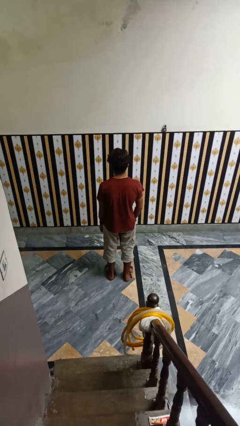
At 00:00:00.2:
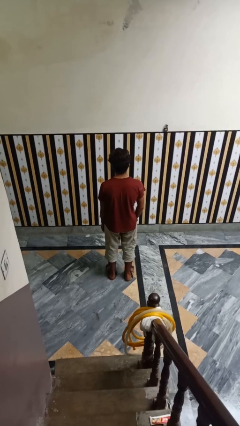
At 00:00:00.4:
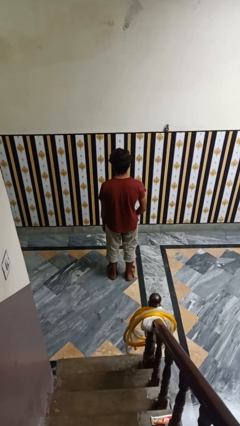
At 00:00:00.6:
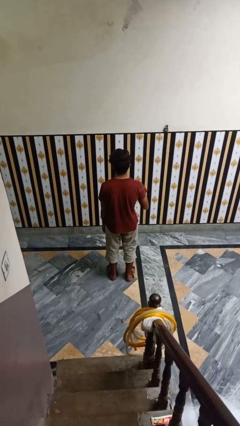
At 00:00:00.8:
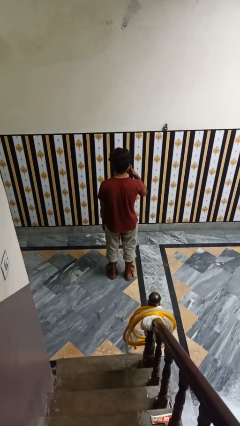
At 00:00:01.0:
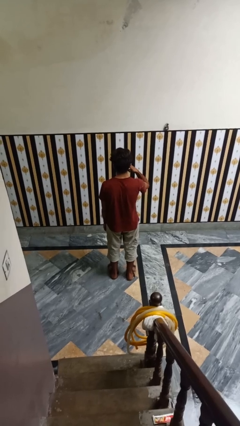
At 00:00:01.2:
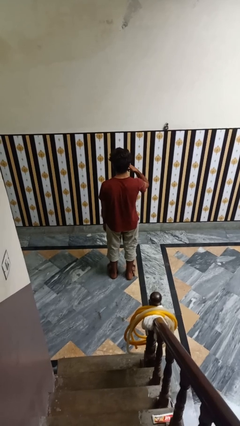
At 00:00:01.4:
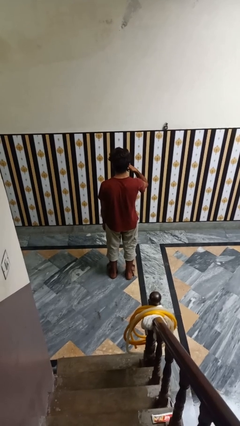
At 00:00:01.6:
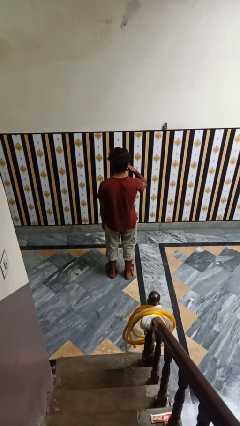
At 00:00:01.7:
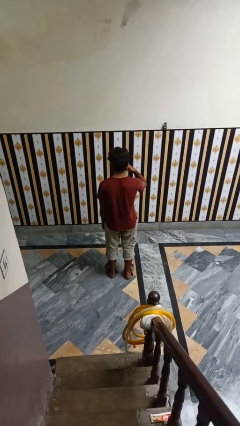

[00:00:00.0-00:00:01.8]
person gestures call me

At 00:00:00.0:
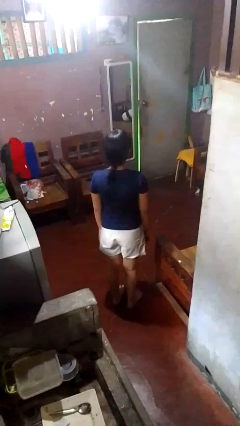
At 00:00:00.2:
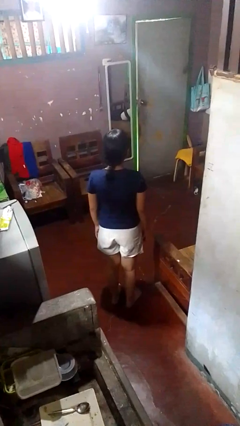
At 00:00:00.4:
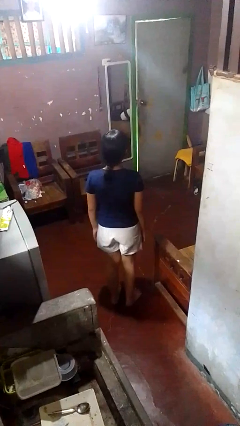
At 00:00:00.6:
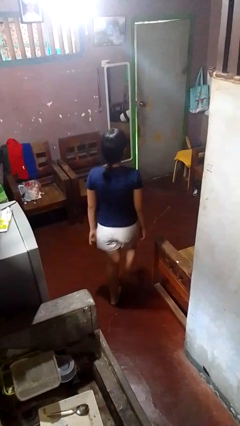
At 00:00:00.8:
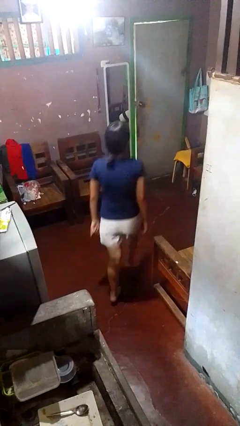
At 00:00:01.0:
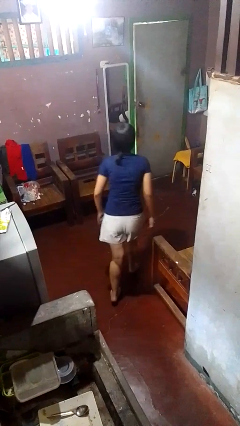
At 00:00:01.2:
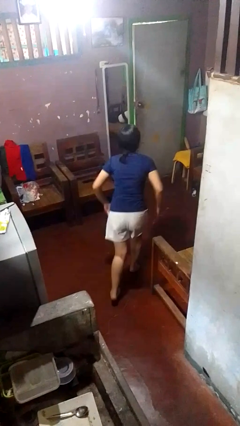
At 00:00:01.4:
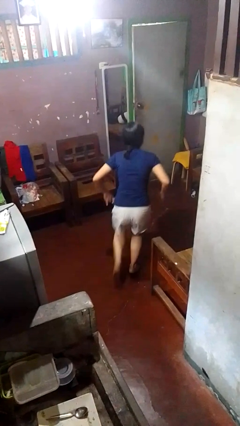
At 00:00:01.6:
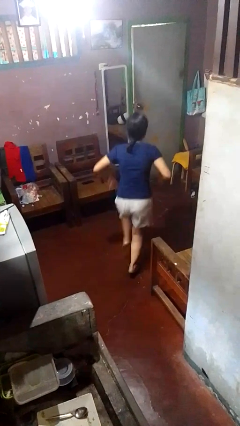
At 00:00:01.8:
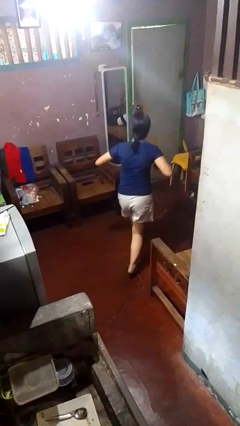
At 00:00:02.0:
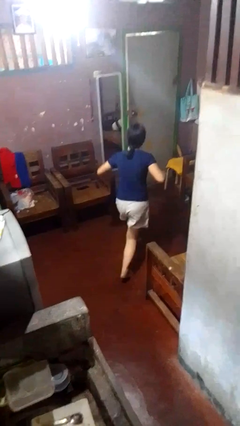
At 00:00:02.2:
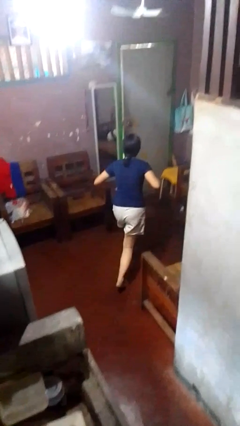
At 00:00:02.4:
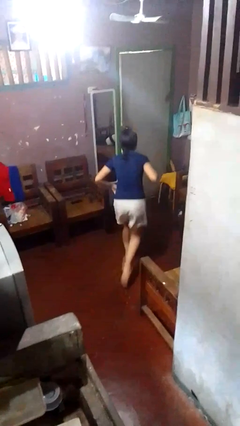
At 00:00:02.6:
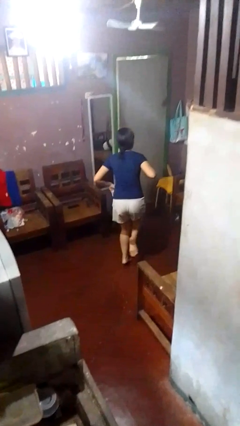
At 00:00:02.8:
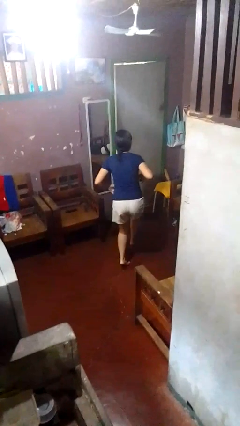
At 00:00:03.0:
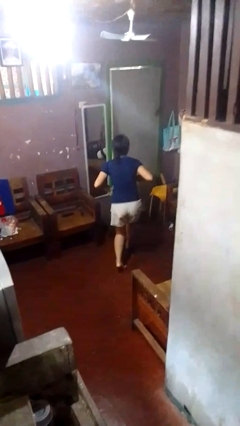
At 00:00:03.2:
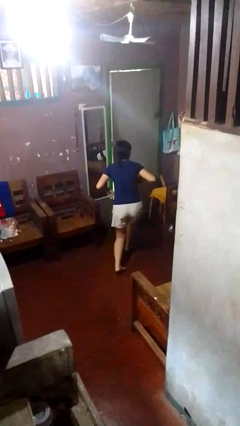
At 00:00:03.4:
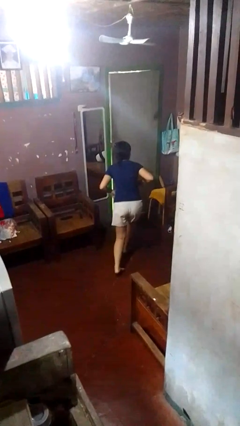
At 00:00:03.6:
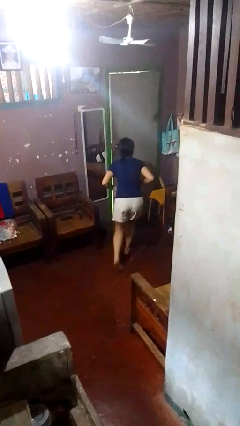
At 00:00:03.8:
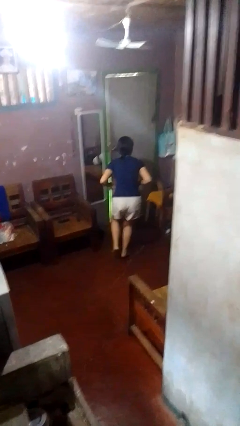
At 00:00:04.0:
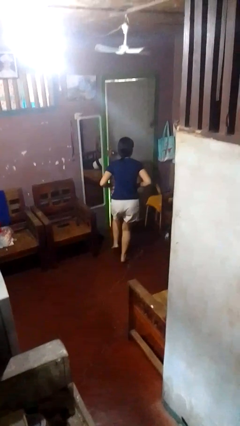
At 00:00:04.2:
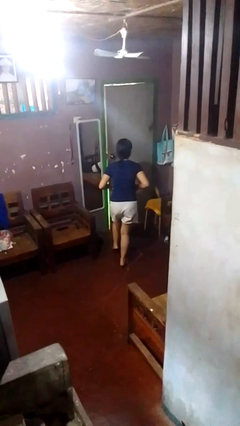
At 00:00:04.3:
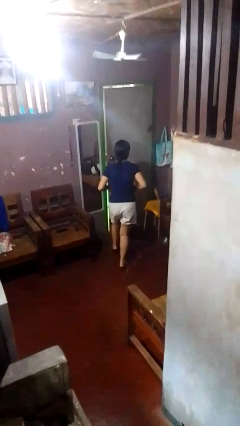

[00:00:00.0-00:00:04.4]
person walks tiptoe

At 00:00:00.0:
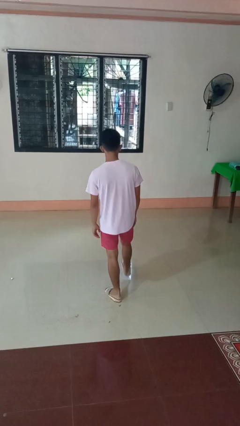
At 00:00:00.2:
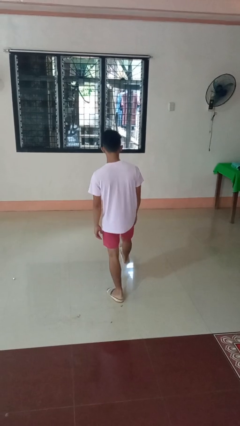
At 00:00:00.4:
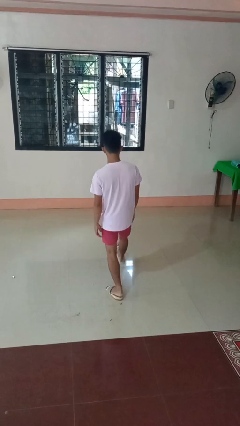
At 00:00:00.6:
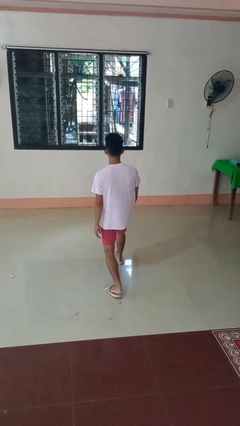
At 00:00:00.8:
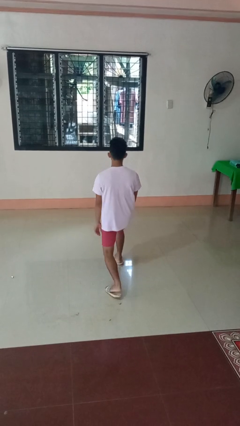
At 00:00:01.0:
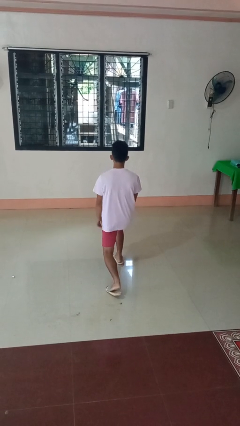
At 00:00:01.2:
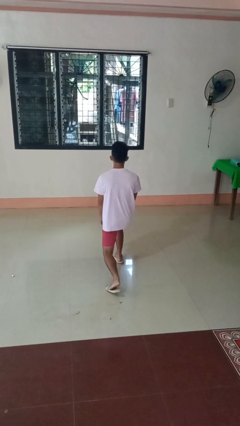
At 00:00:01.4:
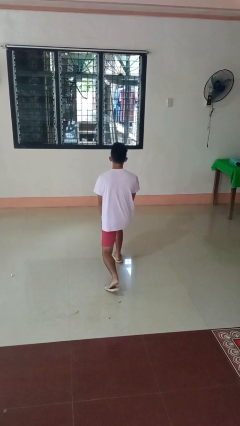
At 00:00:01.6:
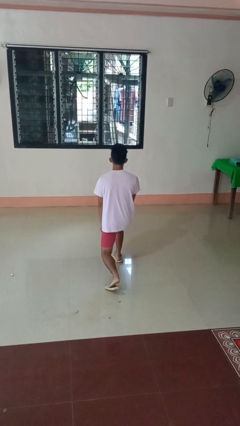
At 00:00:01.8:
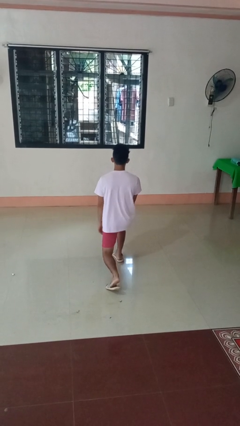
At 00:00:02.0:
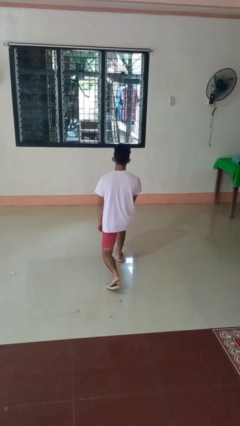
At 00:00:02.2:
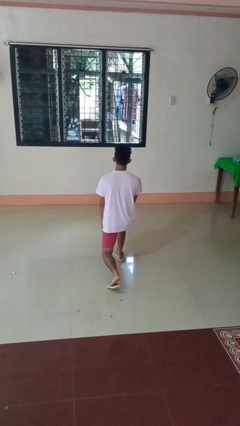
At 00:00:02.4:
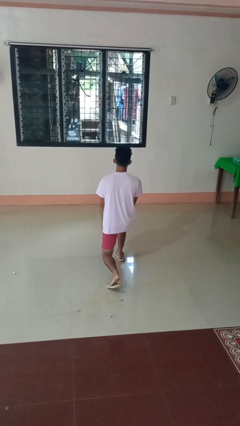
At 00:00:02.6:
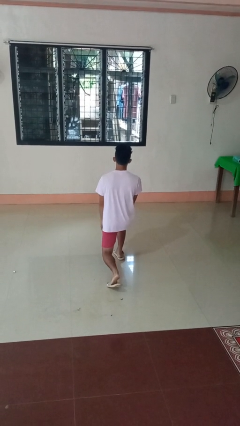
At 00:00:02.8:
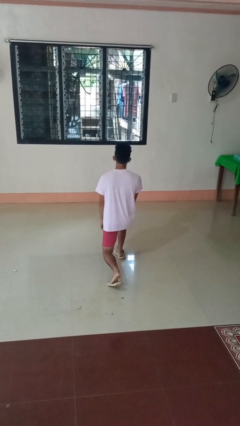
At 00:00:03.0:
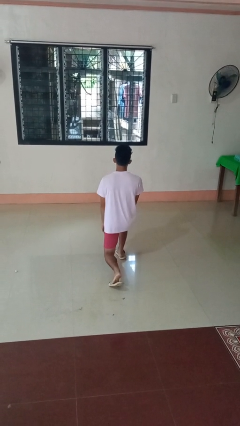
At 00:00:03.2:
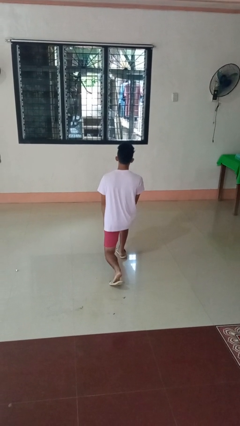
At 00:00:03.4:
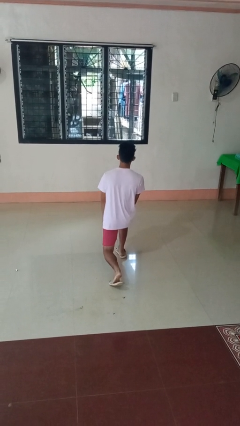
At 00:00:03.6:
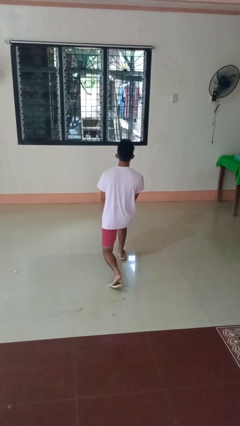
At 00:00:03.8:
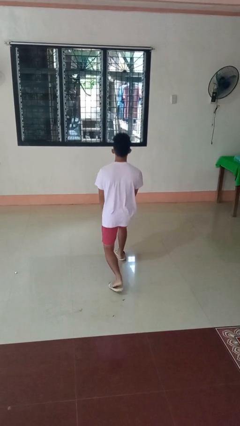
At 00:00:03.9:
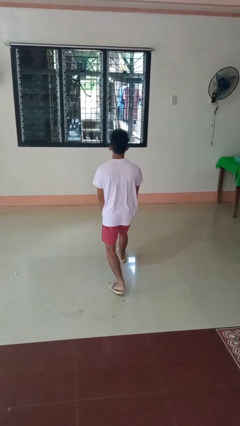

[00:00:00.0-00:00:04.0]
person exercises with lunges

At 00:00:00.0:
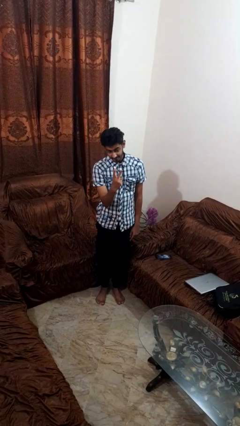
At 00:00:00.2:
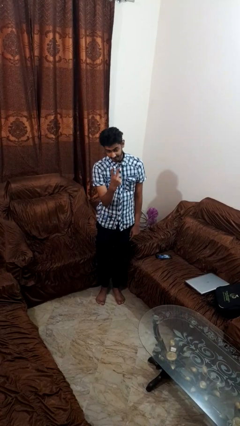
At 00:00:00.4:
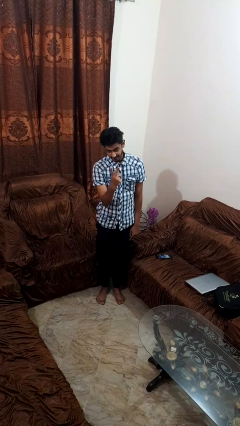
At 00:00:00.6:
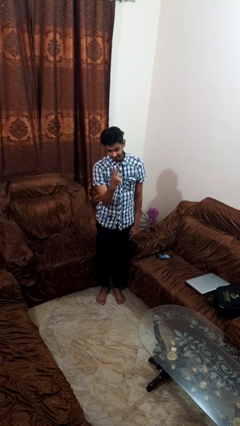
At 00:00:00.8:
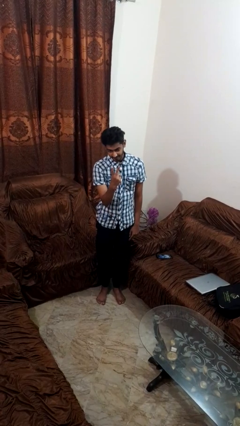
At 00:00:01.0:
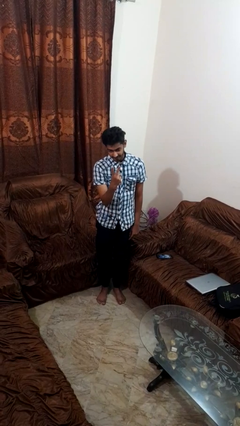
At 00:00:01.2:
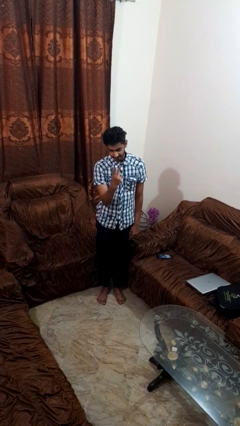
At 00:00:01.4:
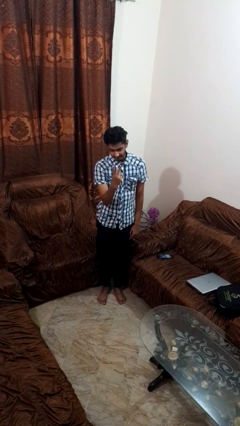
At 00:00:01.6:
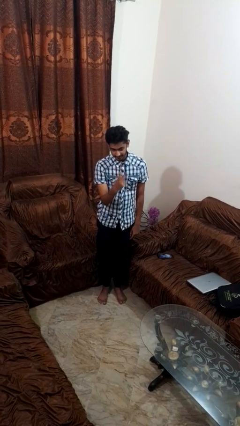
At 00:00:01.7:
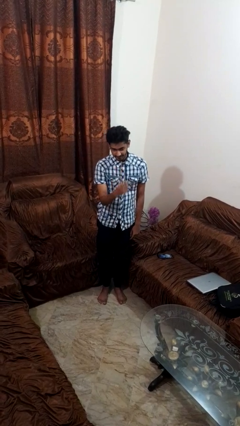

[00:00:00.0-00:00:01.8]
person gestures peace

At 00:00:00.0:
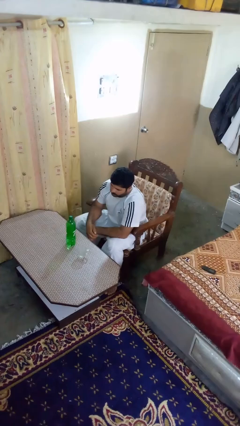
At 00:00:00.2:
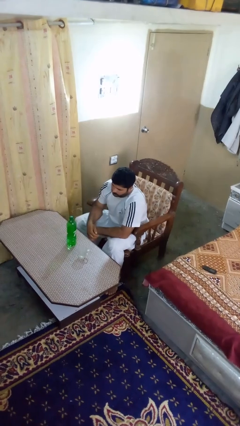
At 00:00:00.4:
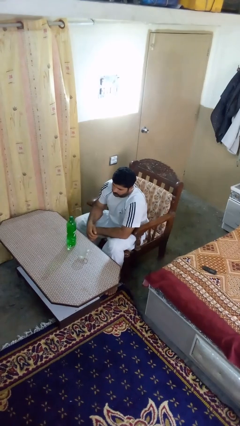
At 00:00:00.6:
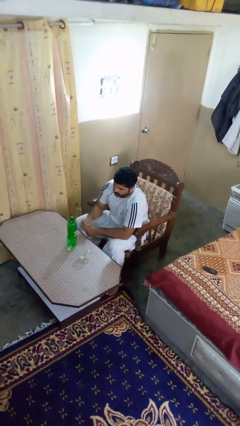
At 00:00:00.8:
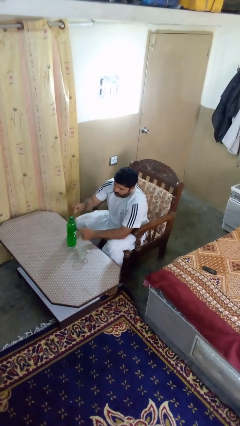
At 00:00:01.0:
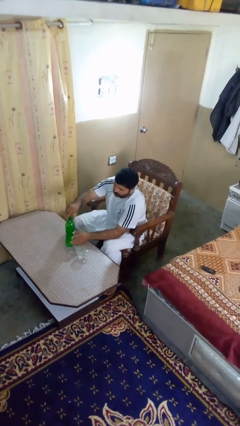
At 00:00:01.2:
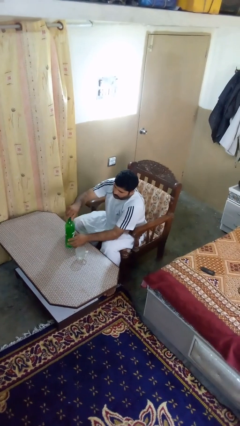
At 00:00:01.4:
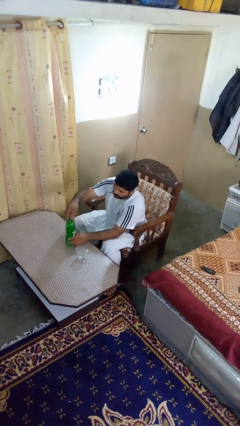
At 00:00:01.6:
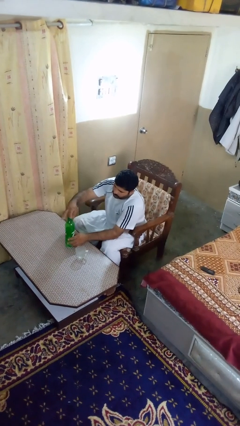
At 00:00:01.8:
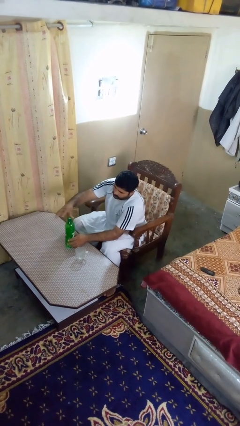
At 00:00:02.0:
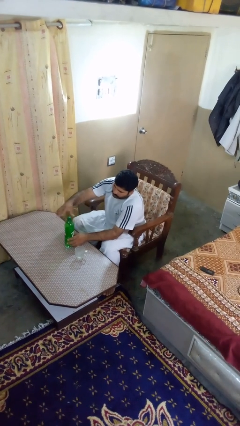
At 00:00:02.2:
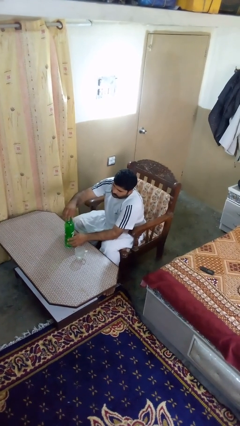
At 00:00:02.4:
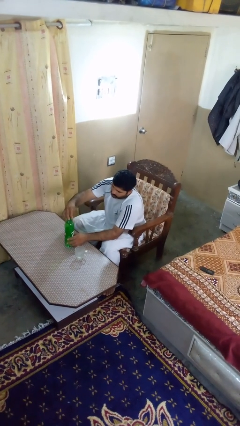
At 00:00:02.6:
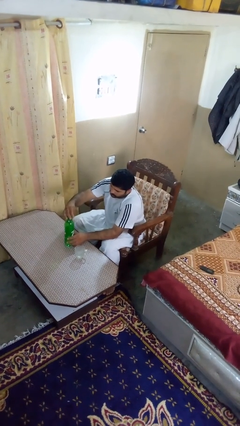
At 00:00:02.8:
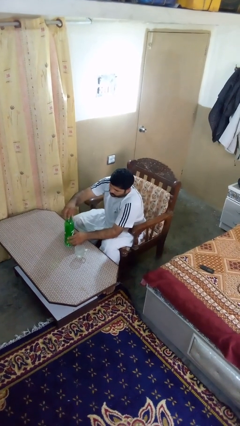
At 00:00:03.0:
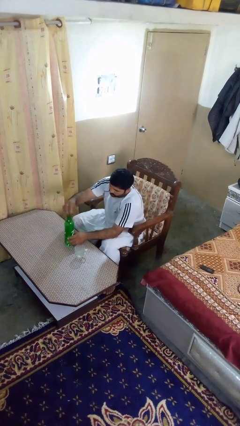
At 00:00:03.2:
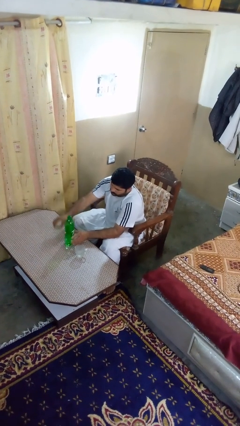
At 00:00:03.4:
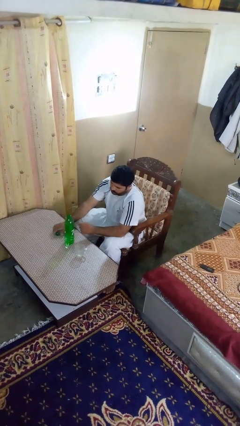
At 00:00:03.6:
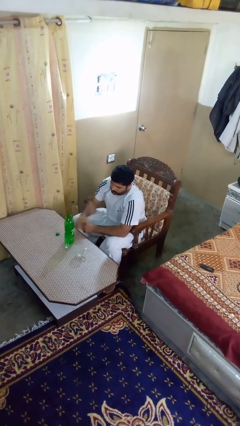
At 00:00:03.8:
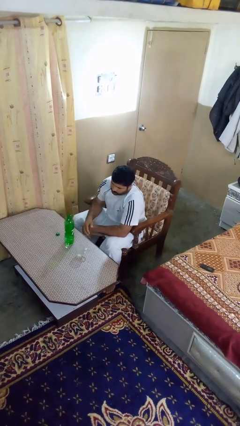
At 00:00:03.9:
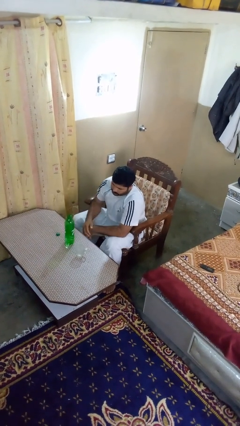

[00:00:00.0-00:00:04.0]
person unscrews lid from bottle

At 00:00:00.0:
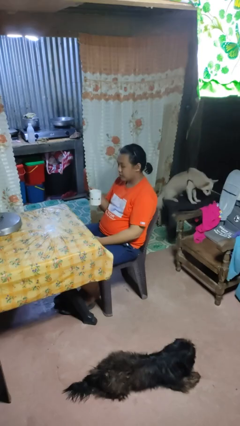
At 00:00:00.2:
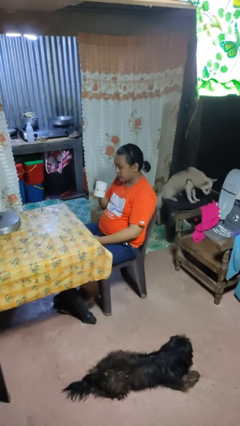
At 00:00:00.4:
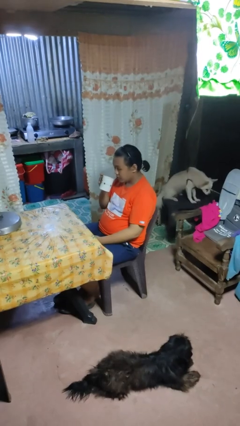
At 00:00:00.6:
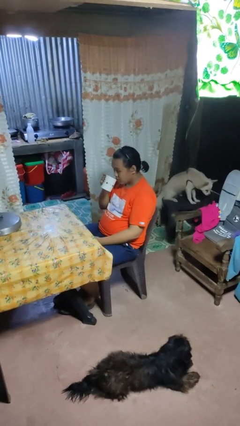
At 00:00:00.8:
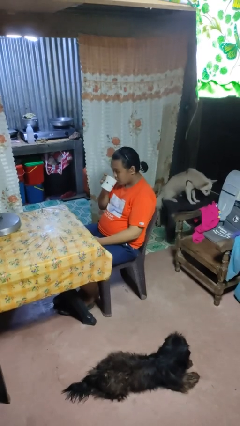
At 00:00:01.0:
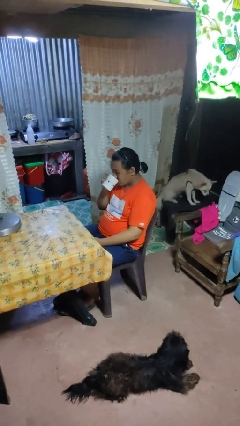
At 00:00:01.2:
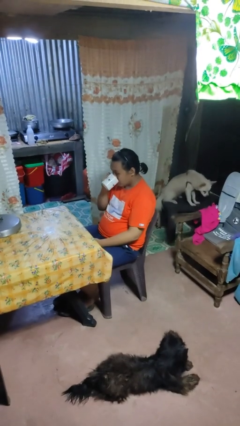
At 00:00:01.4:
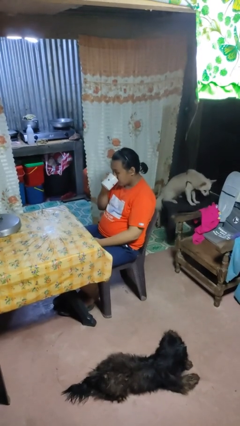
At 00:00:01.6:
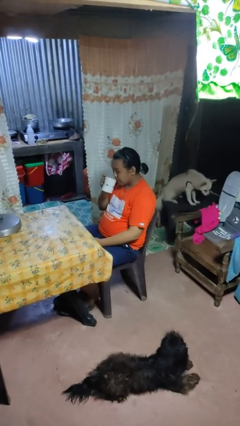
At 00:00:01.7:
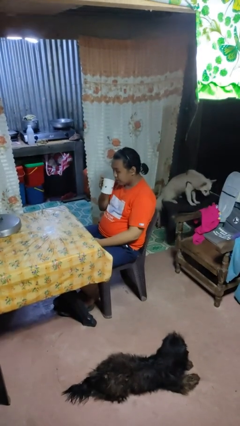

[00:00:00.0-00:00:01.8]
person drinks from mug
